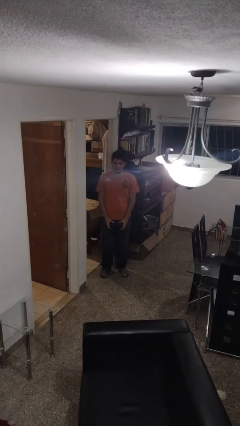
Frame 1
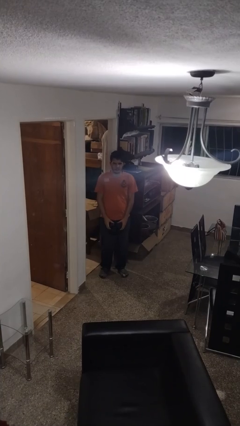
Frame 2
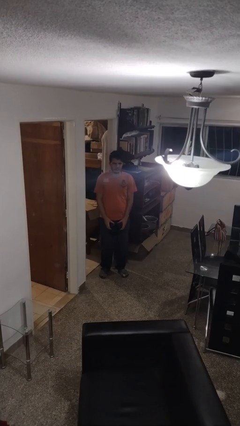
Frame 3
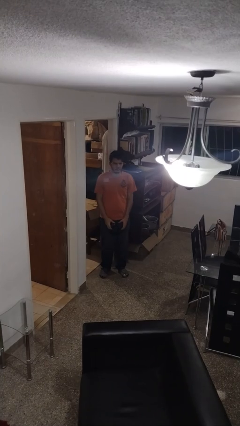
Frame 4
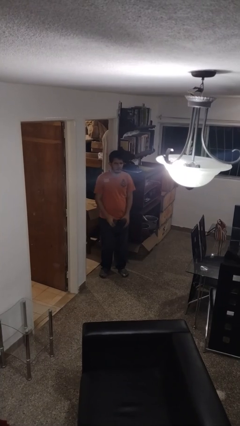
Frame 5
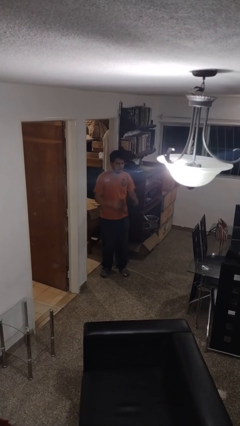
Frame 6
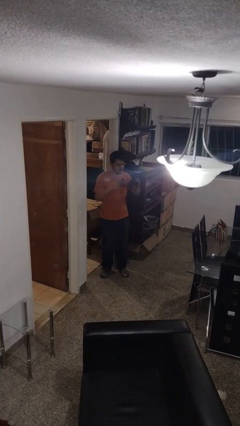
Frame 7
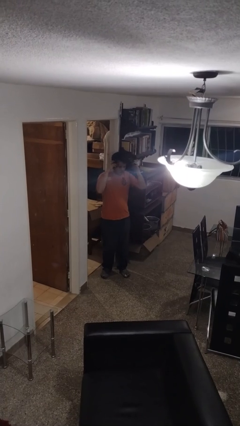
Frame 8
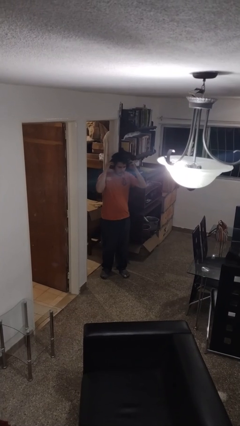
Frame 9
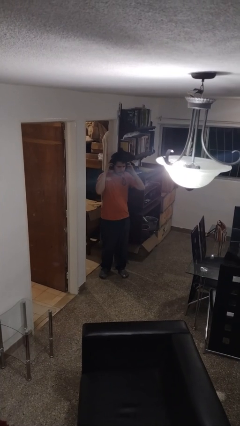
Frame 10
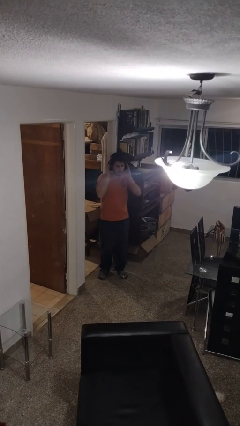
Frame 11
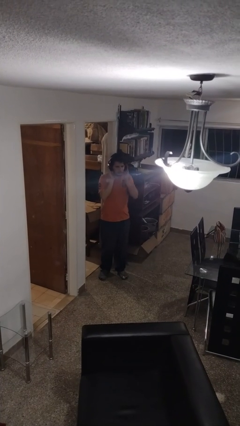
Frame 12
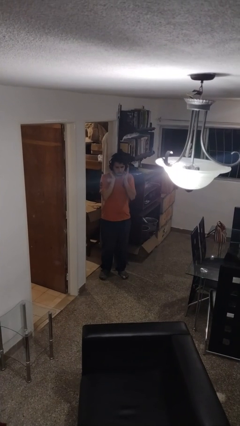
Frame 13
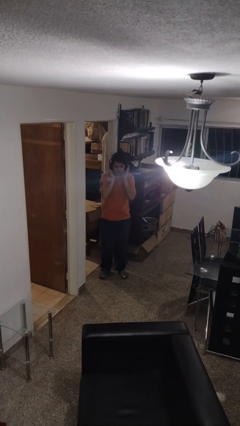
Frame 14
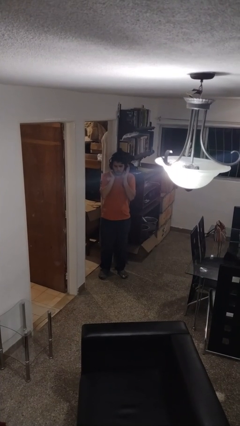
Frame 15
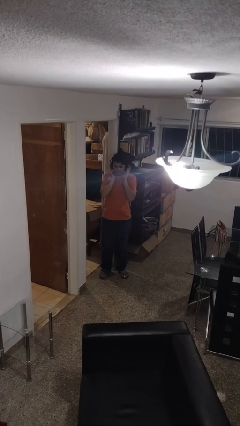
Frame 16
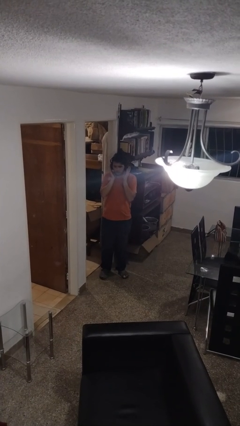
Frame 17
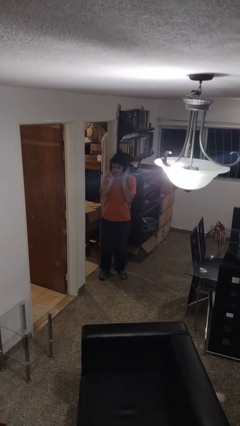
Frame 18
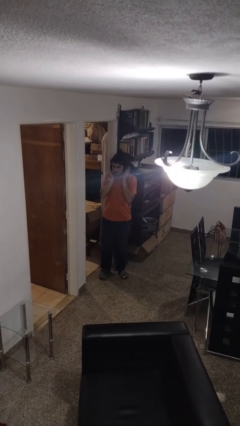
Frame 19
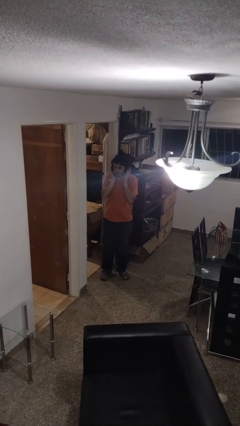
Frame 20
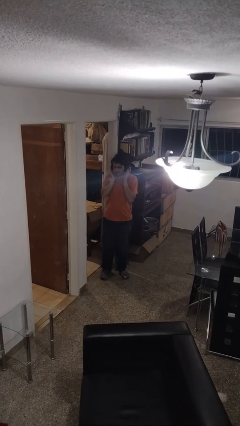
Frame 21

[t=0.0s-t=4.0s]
person puts on headphones

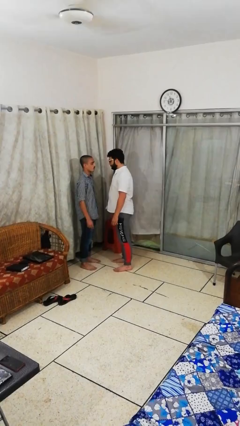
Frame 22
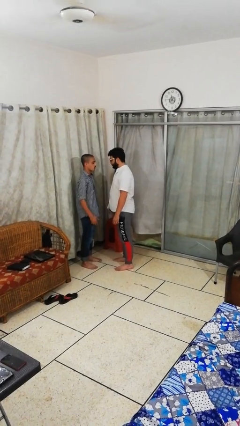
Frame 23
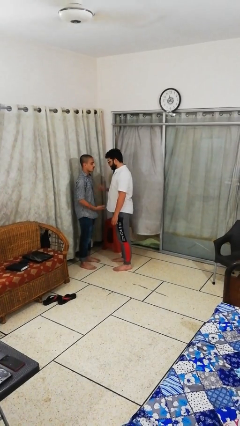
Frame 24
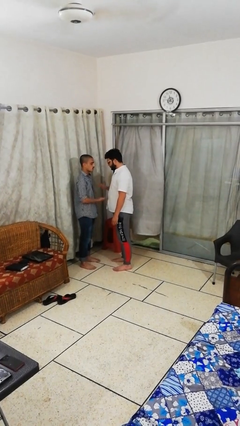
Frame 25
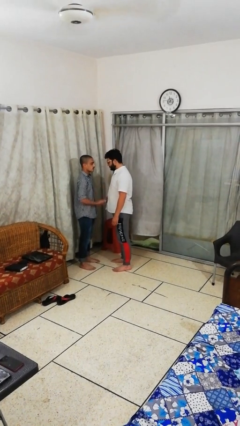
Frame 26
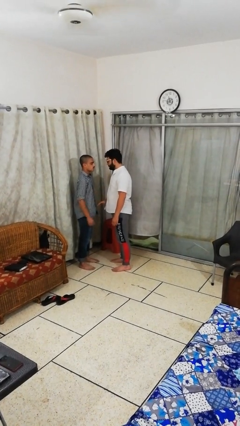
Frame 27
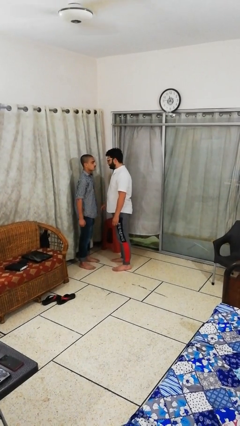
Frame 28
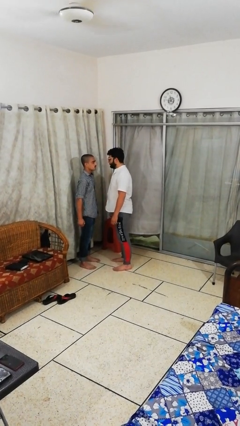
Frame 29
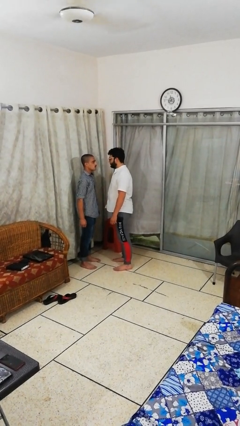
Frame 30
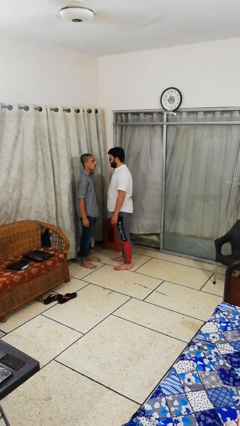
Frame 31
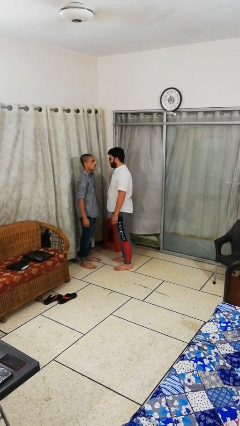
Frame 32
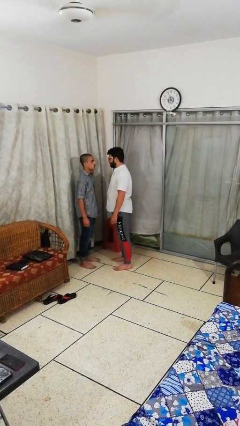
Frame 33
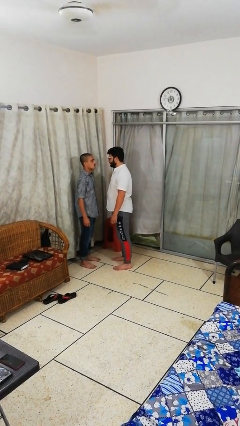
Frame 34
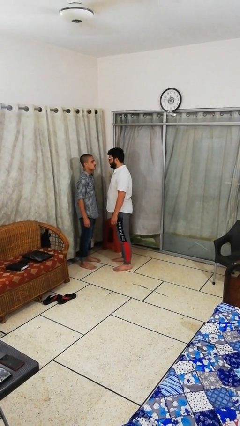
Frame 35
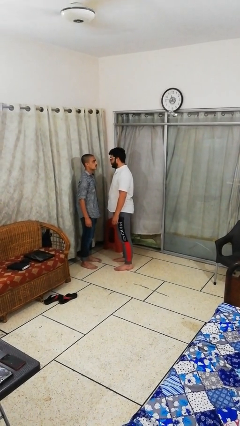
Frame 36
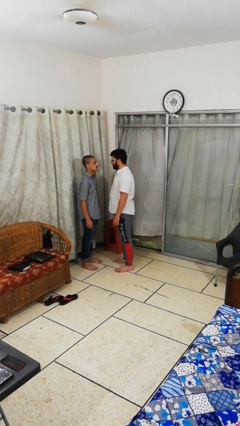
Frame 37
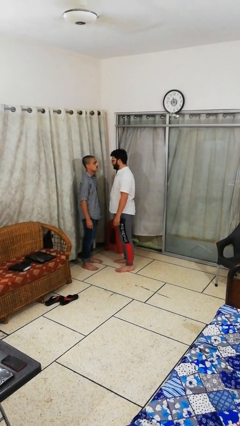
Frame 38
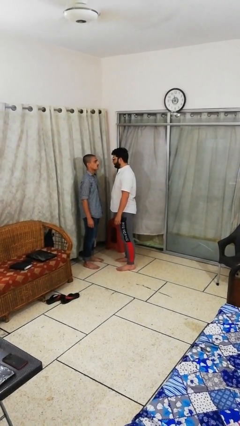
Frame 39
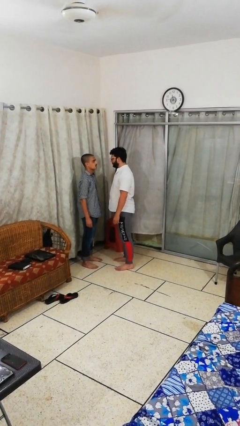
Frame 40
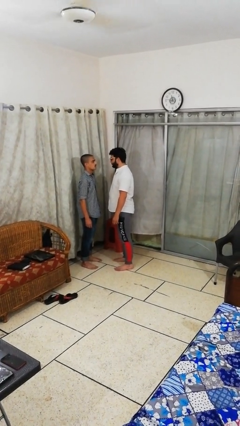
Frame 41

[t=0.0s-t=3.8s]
person highfives hand

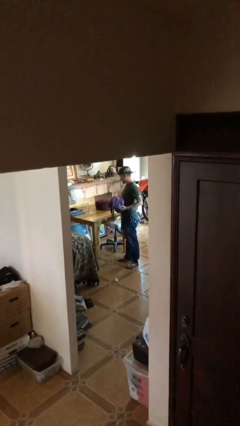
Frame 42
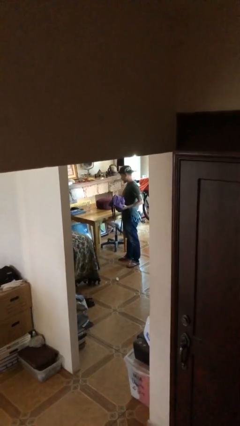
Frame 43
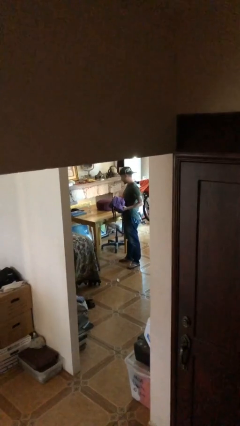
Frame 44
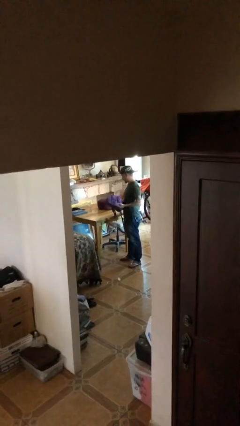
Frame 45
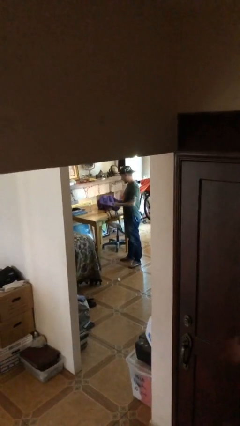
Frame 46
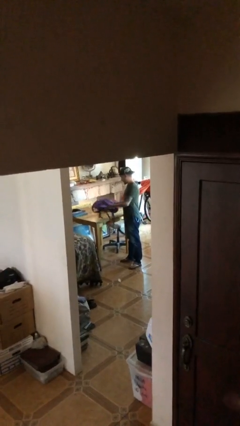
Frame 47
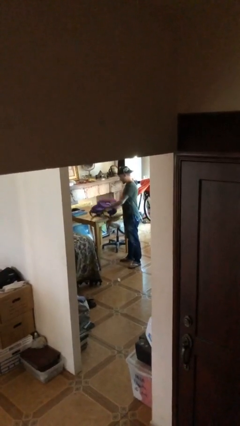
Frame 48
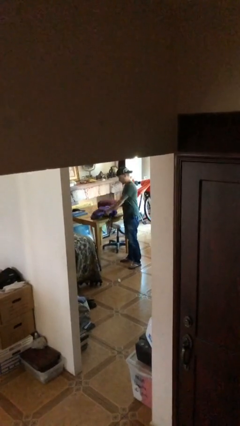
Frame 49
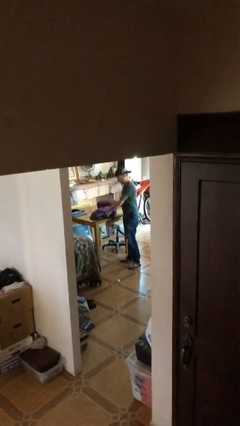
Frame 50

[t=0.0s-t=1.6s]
person puts down object on table

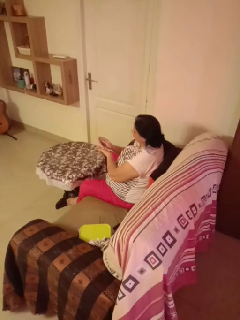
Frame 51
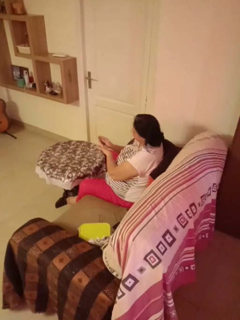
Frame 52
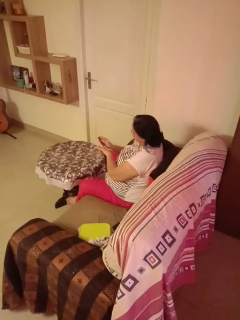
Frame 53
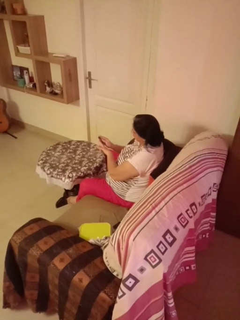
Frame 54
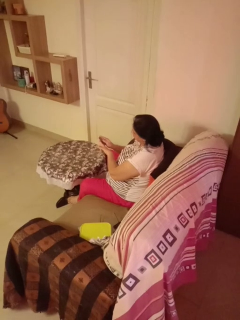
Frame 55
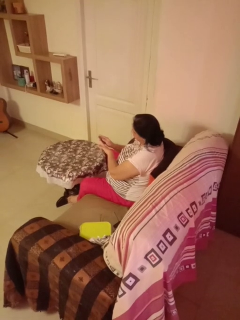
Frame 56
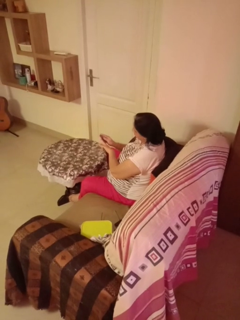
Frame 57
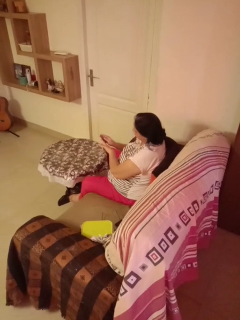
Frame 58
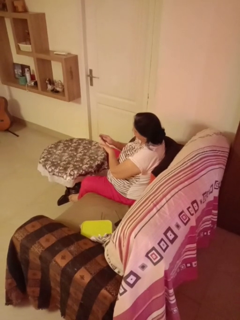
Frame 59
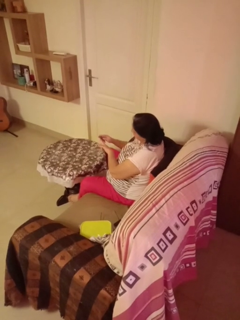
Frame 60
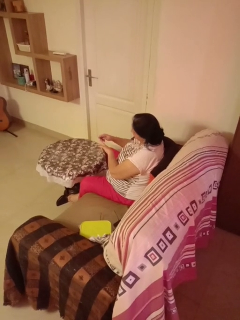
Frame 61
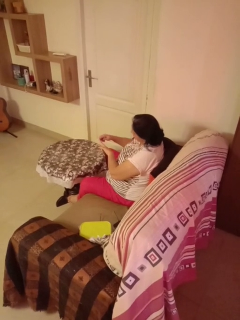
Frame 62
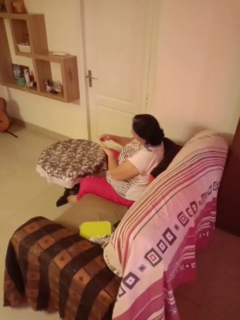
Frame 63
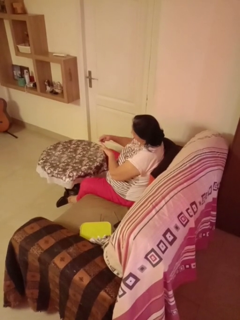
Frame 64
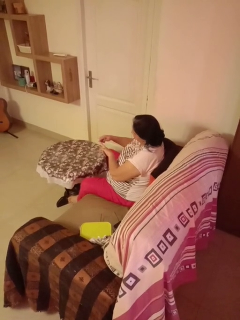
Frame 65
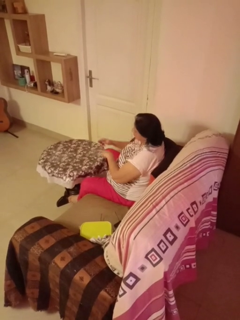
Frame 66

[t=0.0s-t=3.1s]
person files fingernails

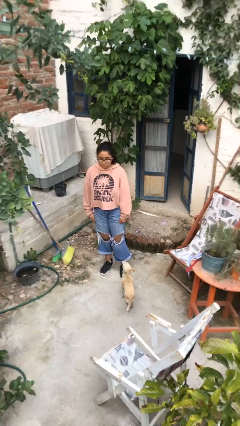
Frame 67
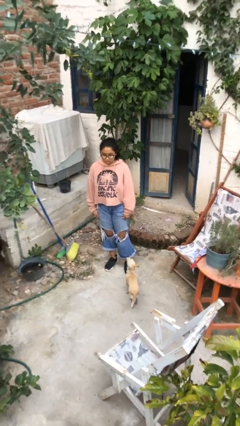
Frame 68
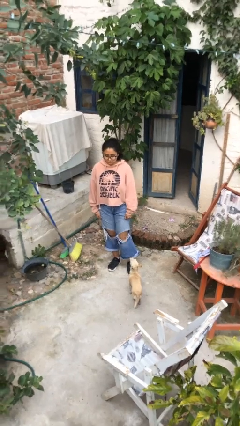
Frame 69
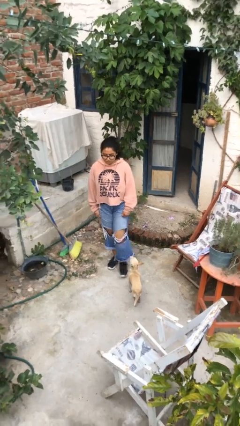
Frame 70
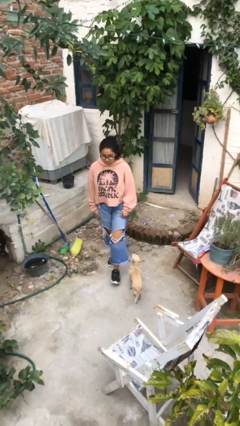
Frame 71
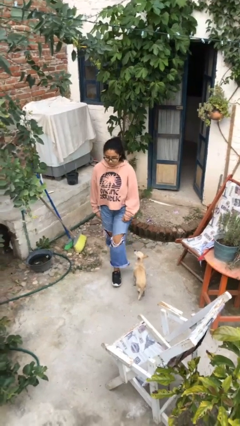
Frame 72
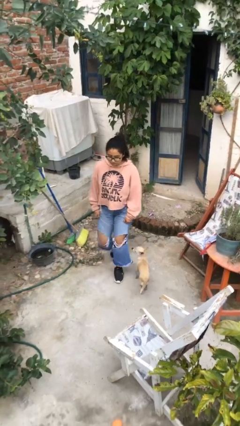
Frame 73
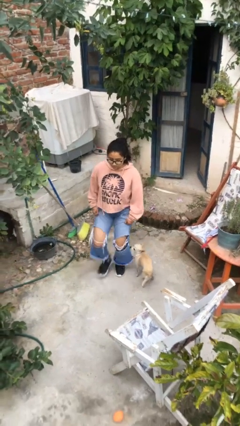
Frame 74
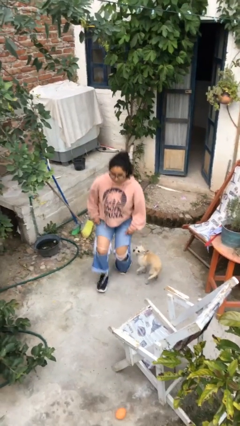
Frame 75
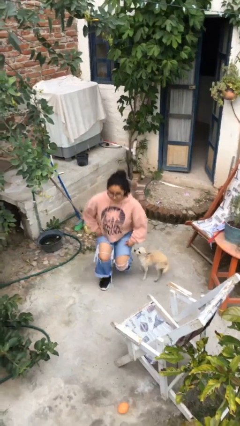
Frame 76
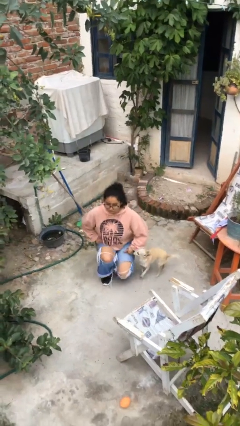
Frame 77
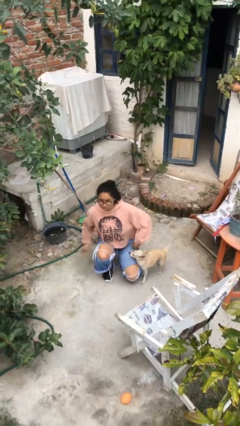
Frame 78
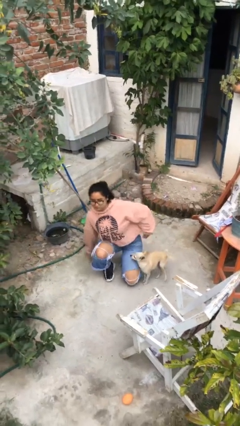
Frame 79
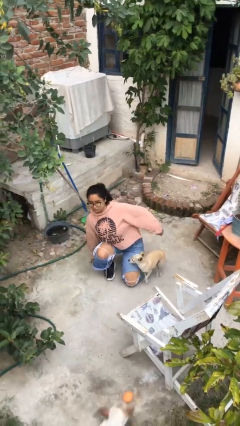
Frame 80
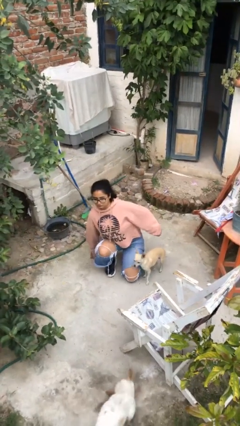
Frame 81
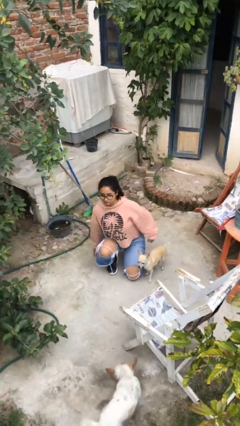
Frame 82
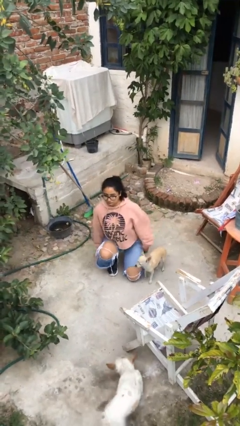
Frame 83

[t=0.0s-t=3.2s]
person kneels

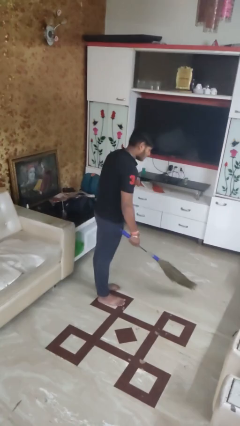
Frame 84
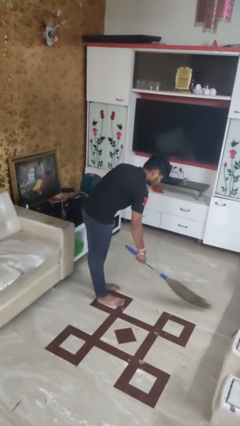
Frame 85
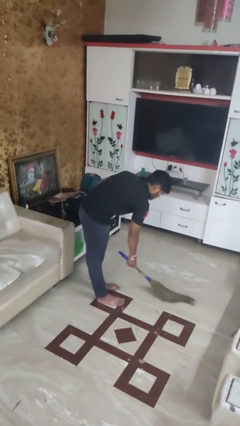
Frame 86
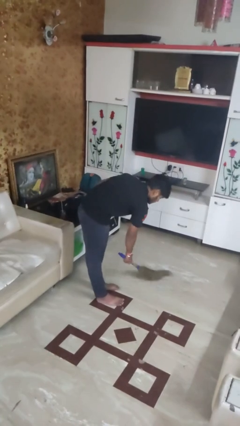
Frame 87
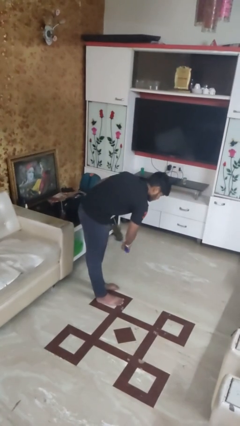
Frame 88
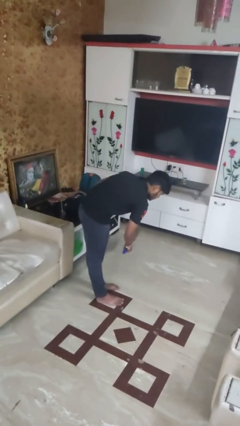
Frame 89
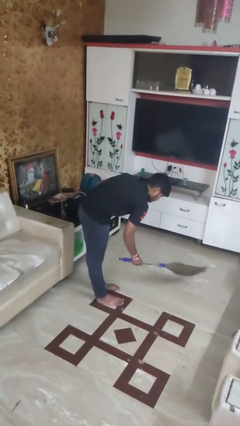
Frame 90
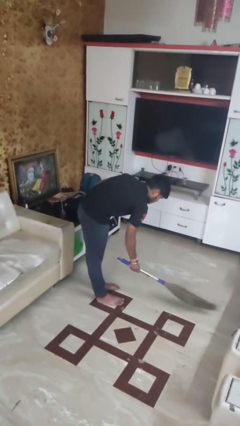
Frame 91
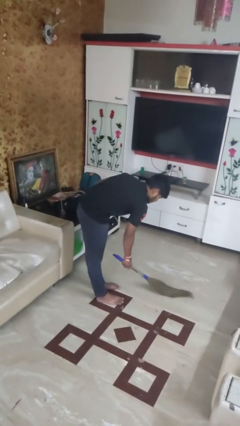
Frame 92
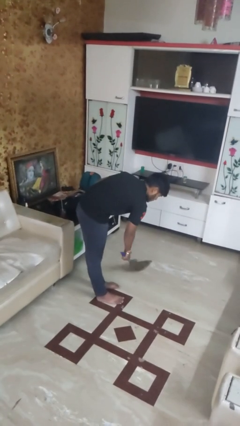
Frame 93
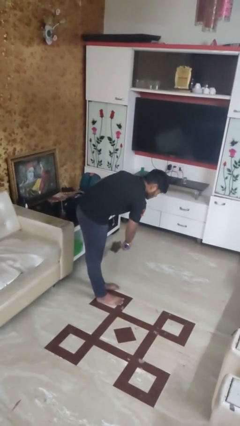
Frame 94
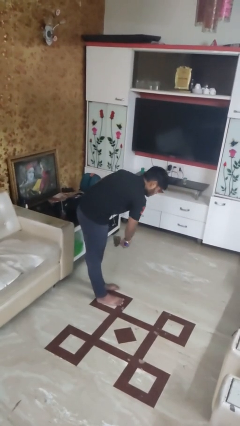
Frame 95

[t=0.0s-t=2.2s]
person sweeps floor
